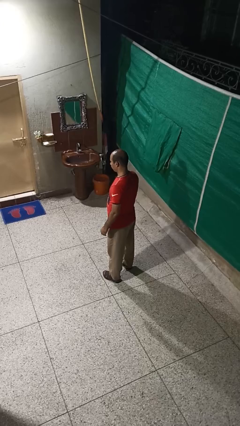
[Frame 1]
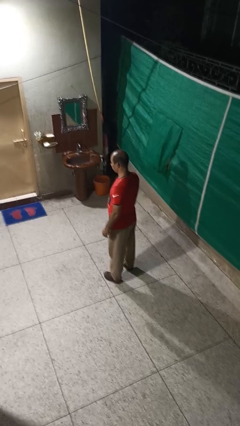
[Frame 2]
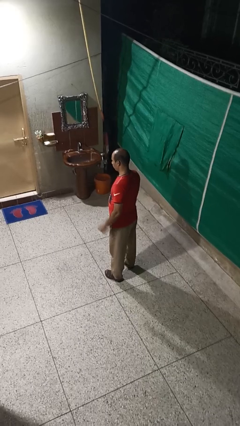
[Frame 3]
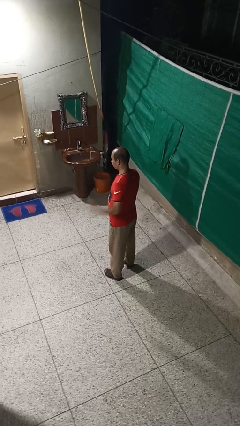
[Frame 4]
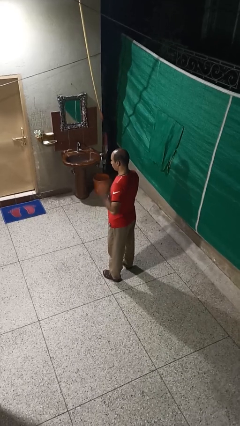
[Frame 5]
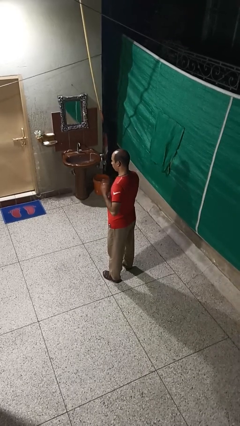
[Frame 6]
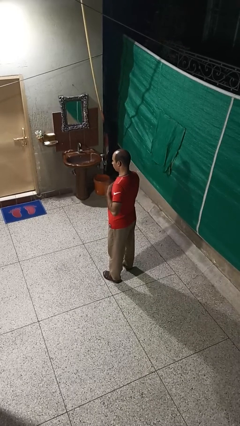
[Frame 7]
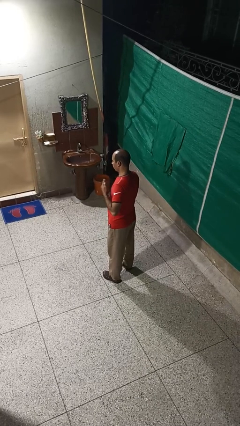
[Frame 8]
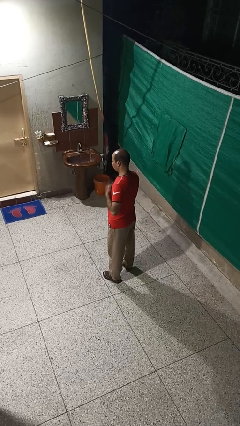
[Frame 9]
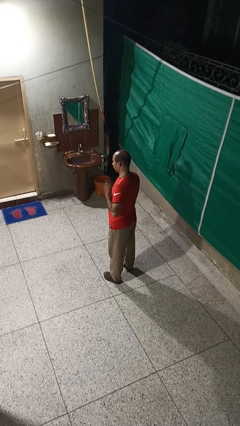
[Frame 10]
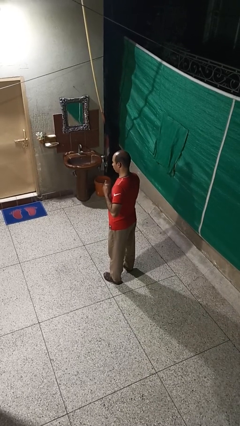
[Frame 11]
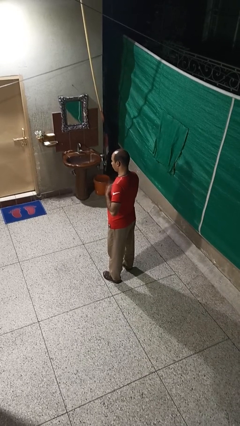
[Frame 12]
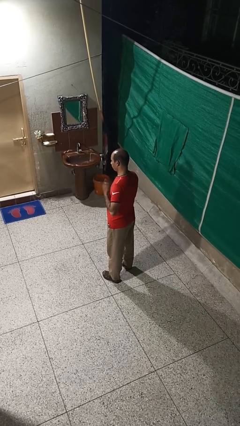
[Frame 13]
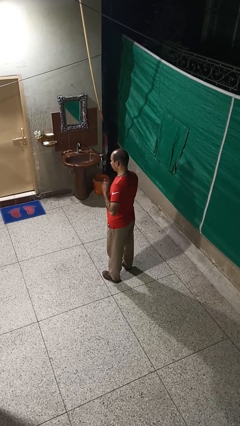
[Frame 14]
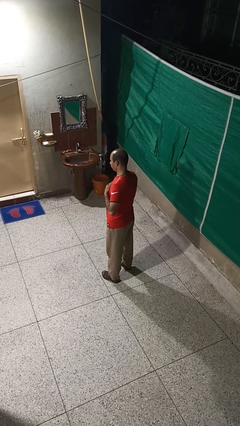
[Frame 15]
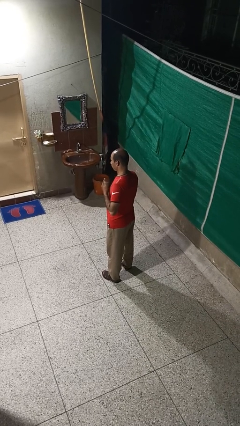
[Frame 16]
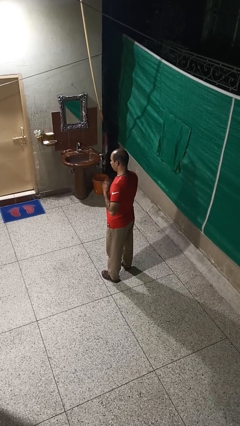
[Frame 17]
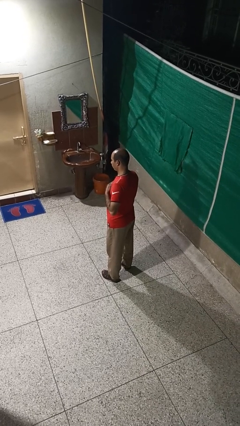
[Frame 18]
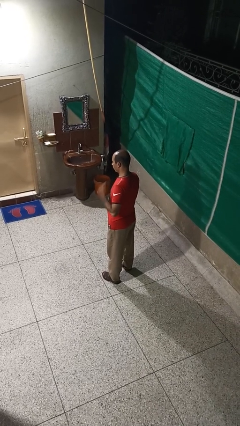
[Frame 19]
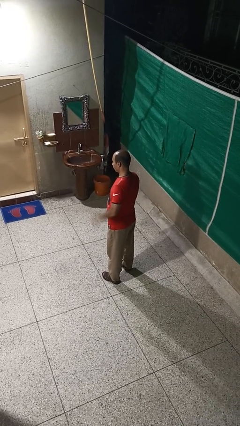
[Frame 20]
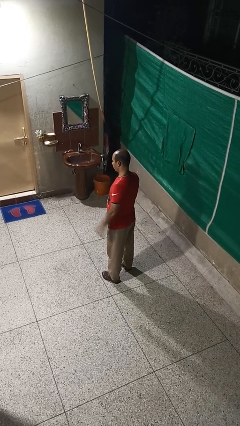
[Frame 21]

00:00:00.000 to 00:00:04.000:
person drums on chest

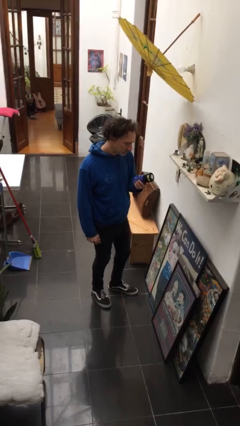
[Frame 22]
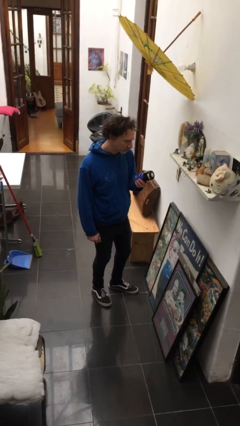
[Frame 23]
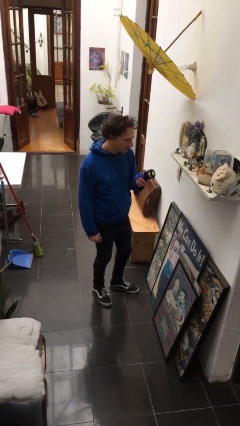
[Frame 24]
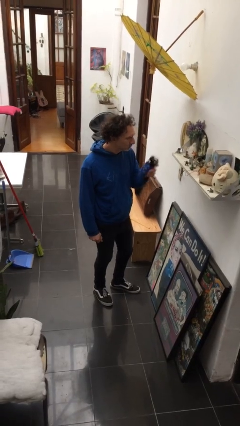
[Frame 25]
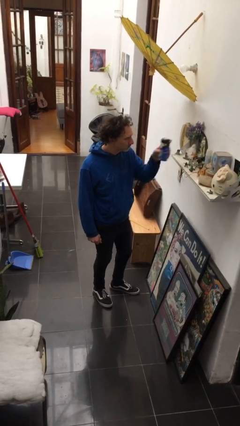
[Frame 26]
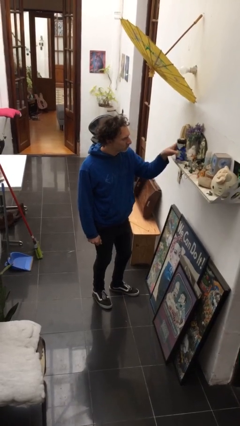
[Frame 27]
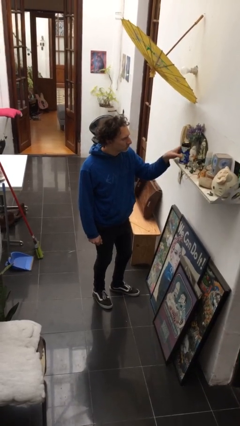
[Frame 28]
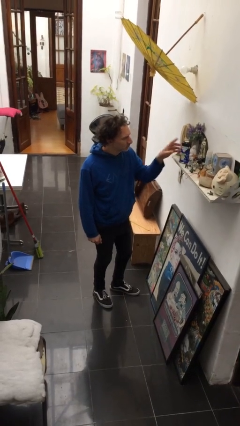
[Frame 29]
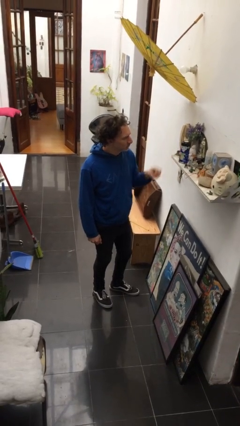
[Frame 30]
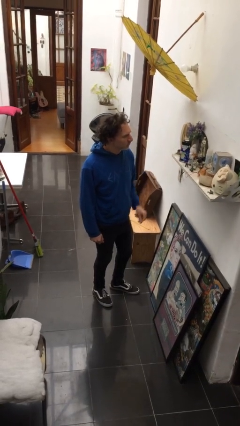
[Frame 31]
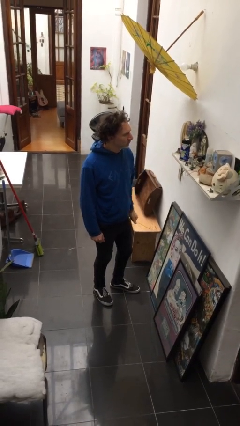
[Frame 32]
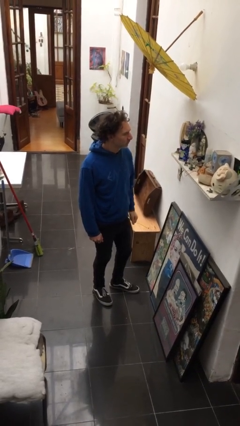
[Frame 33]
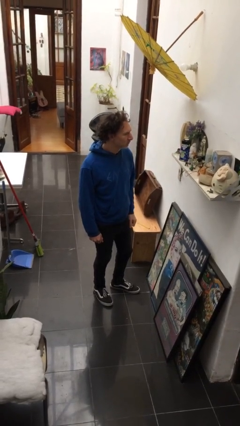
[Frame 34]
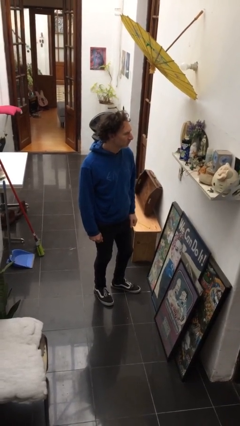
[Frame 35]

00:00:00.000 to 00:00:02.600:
person puts down object on shelf

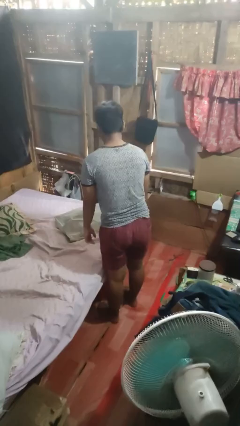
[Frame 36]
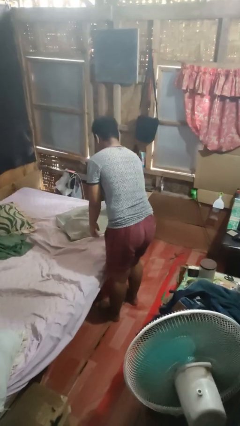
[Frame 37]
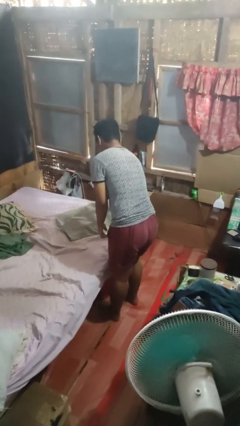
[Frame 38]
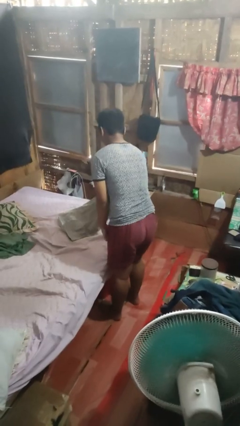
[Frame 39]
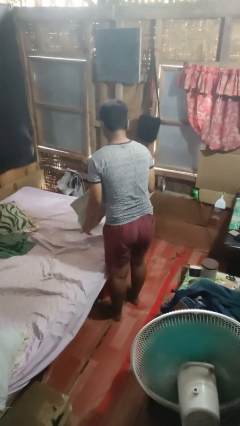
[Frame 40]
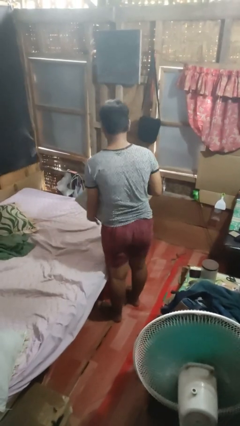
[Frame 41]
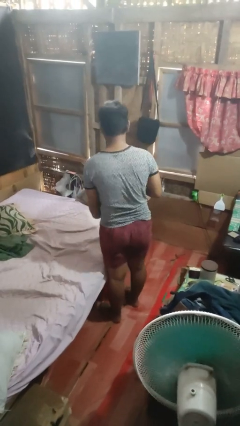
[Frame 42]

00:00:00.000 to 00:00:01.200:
person picks up object from bed

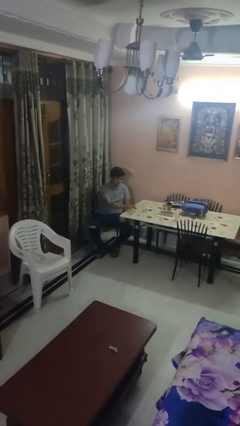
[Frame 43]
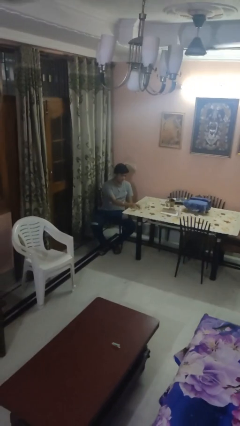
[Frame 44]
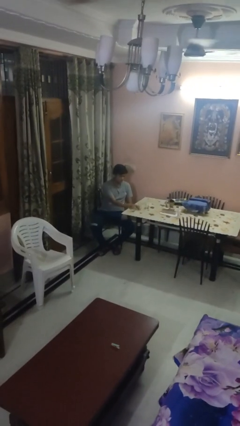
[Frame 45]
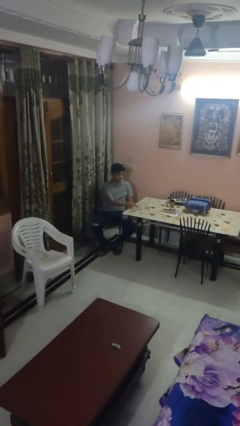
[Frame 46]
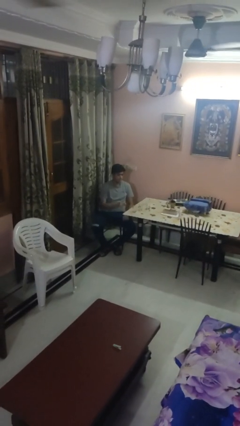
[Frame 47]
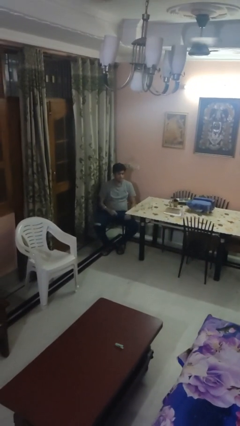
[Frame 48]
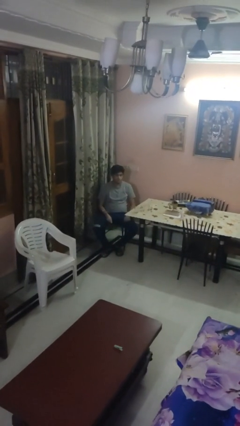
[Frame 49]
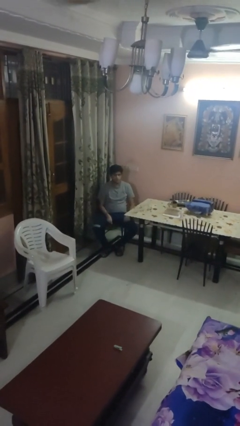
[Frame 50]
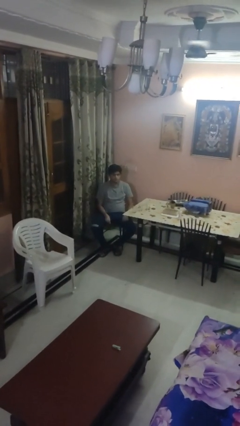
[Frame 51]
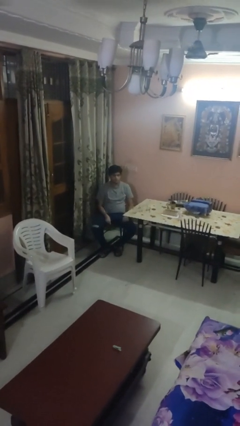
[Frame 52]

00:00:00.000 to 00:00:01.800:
person puts down object on table

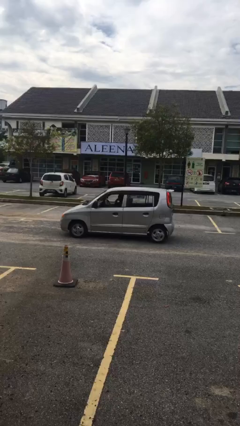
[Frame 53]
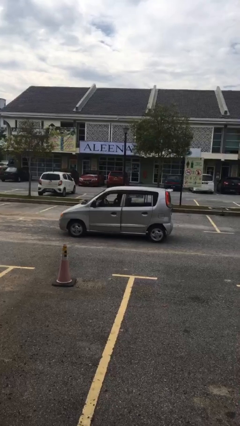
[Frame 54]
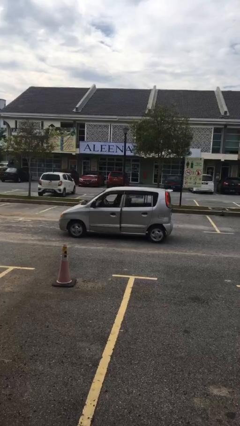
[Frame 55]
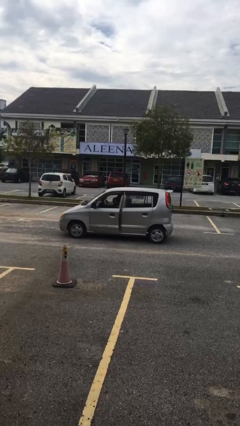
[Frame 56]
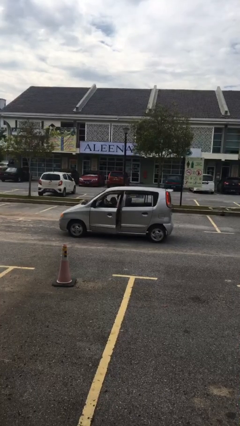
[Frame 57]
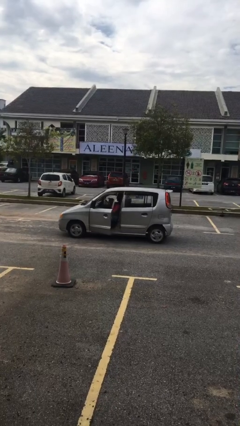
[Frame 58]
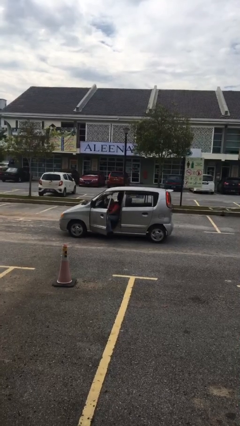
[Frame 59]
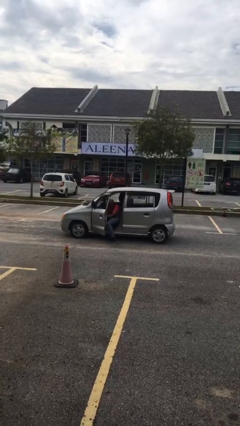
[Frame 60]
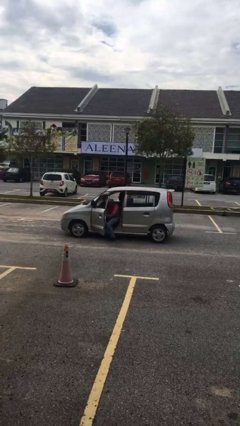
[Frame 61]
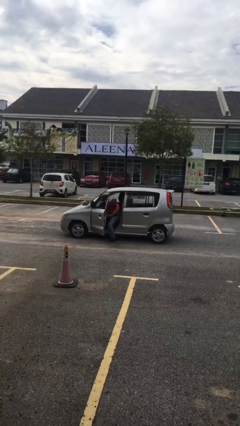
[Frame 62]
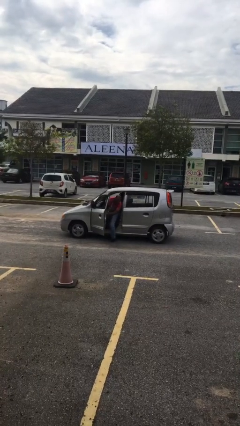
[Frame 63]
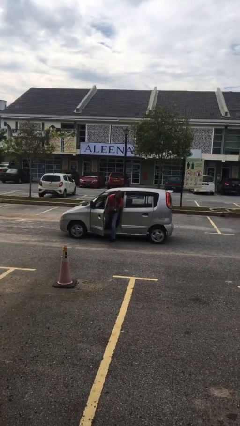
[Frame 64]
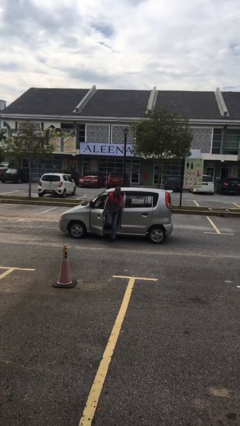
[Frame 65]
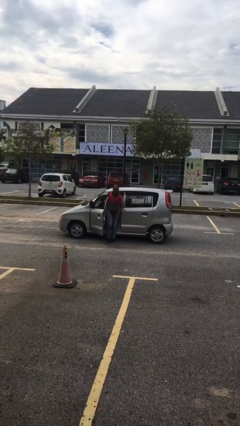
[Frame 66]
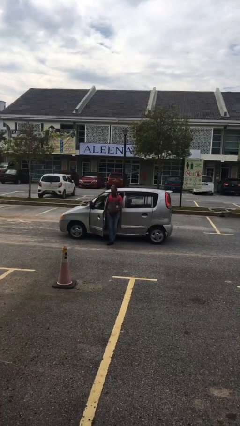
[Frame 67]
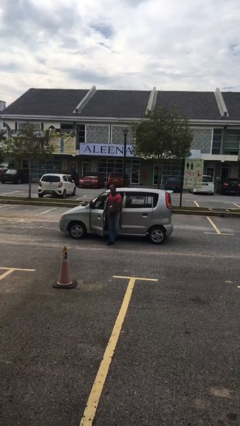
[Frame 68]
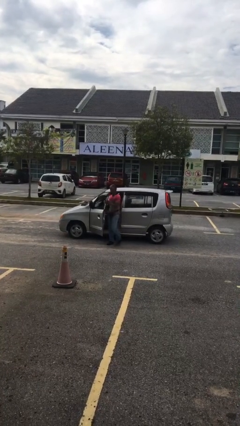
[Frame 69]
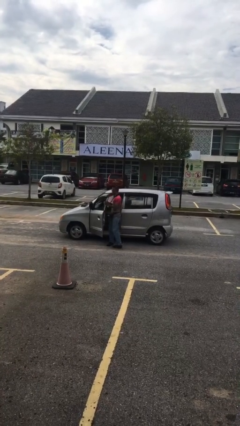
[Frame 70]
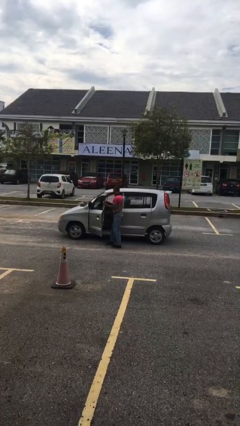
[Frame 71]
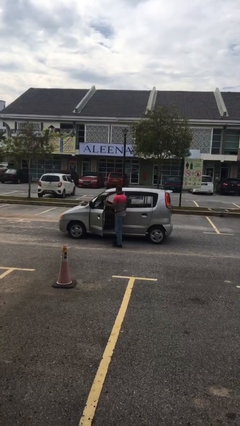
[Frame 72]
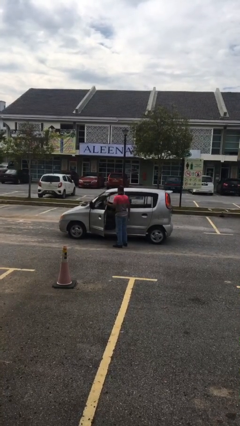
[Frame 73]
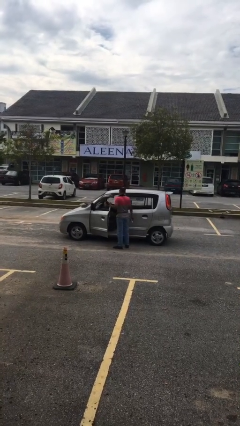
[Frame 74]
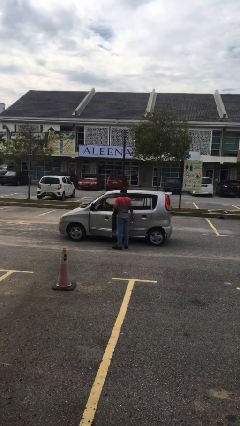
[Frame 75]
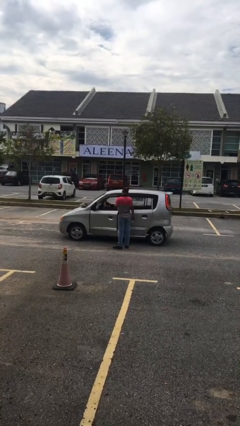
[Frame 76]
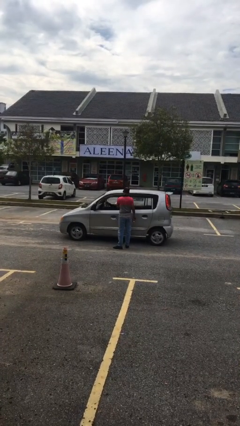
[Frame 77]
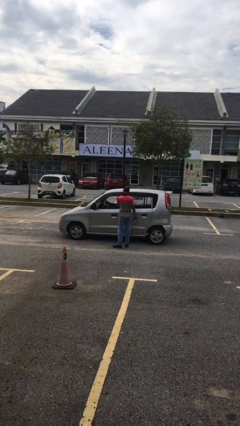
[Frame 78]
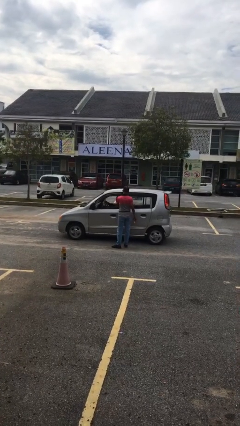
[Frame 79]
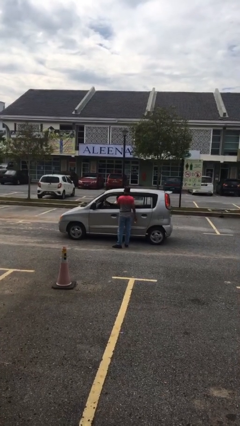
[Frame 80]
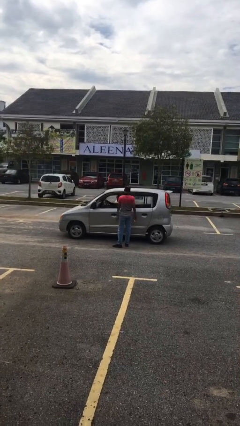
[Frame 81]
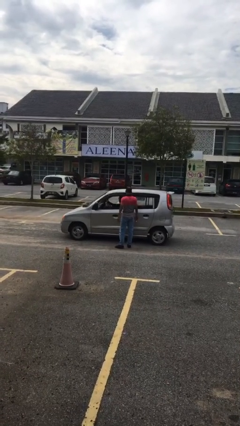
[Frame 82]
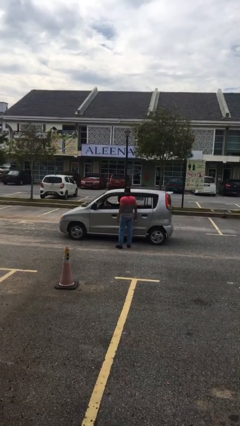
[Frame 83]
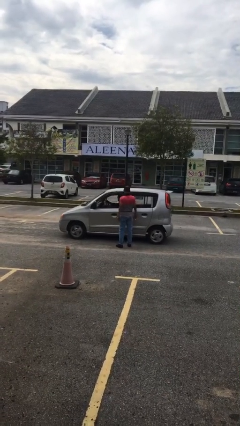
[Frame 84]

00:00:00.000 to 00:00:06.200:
car drops off person

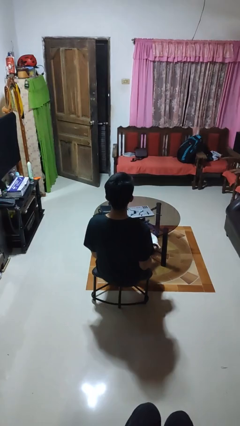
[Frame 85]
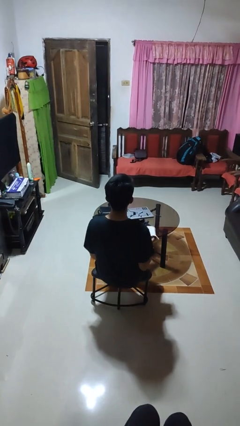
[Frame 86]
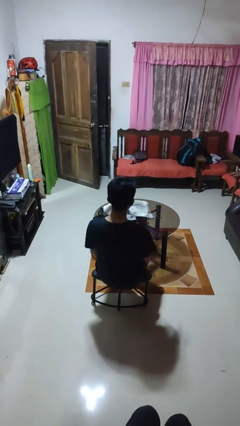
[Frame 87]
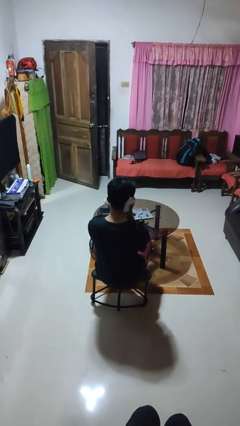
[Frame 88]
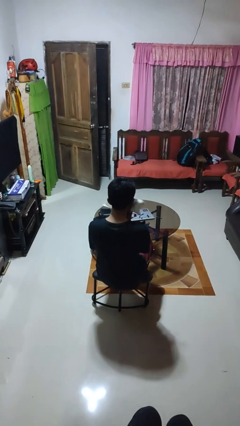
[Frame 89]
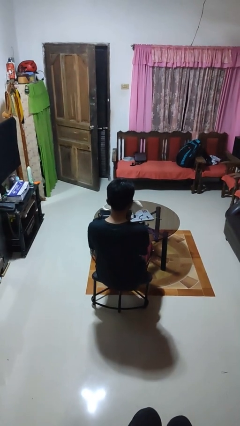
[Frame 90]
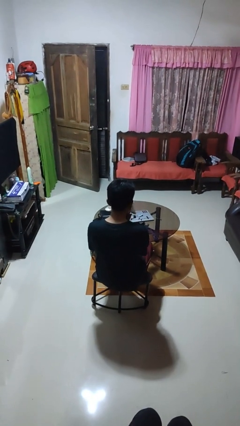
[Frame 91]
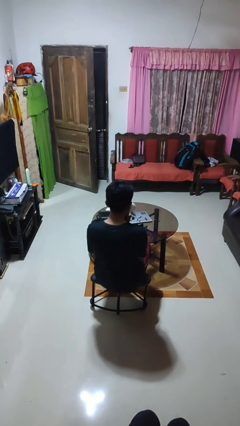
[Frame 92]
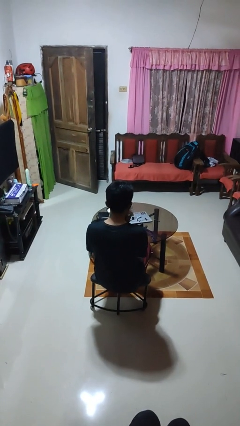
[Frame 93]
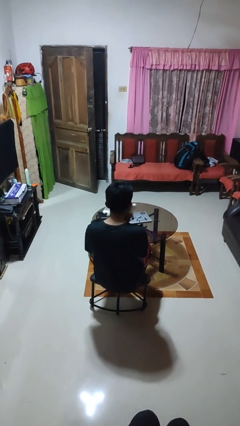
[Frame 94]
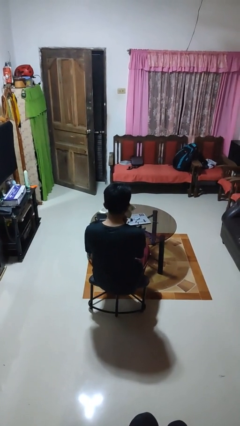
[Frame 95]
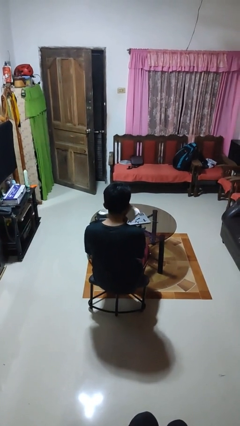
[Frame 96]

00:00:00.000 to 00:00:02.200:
person wipes mouth with napkin
